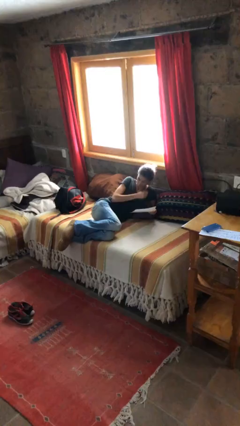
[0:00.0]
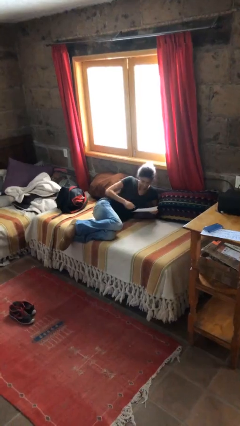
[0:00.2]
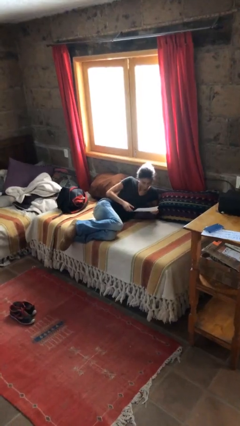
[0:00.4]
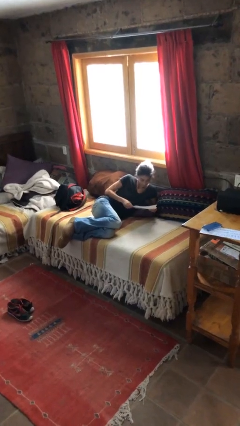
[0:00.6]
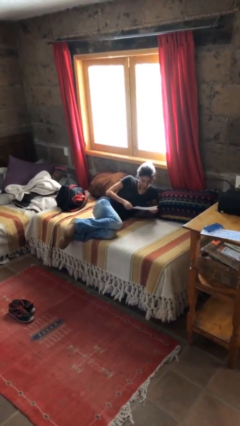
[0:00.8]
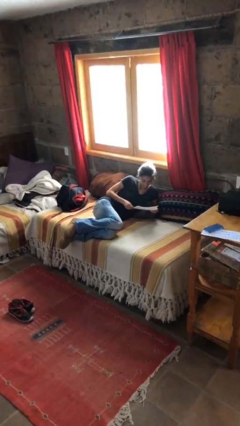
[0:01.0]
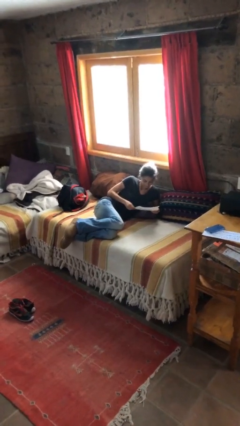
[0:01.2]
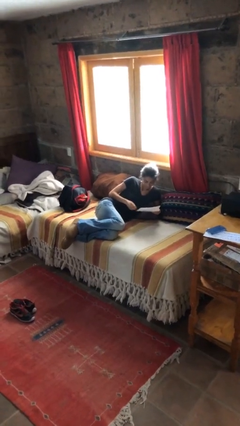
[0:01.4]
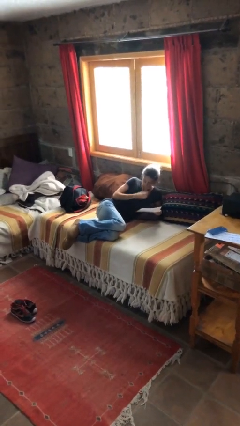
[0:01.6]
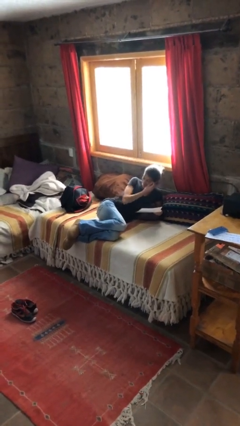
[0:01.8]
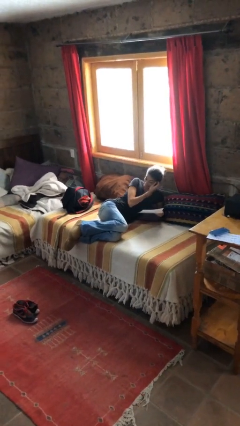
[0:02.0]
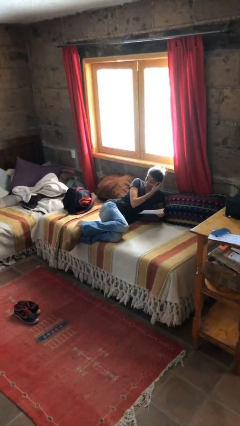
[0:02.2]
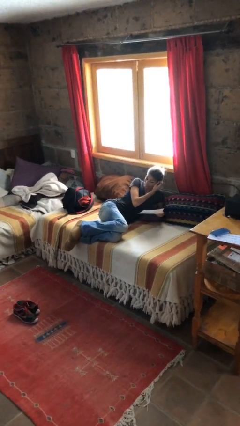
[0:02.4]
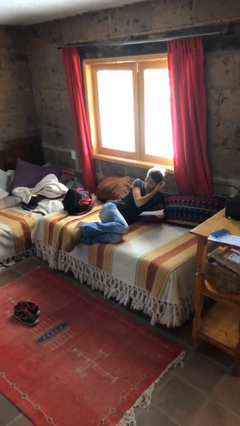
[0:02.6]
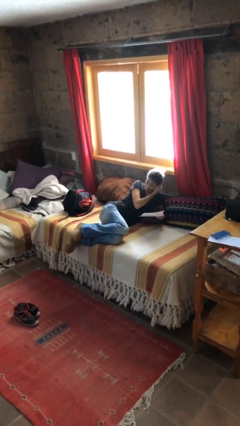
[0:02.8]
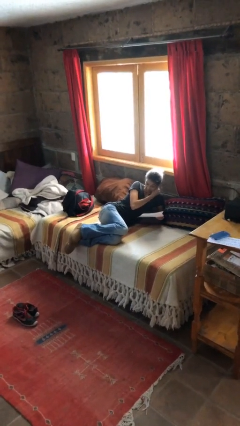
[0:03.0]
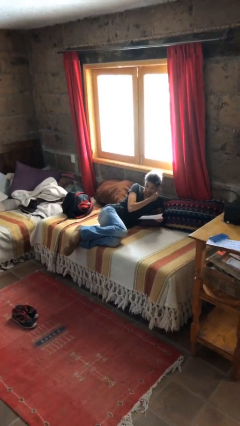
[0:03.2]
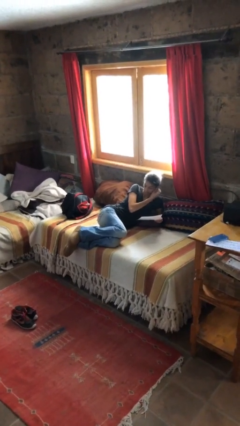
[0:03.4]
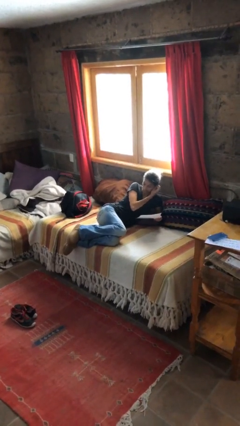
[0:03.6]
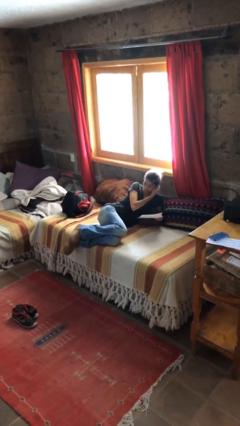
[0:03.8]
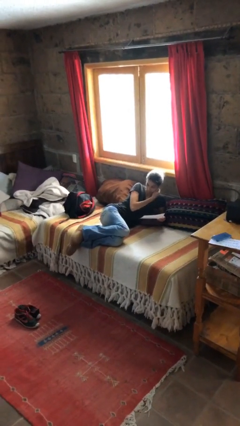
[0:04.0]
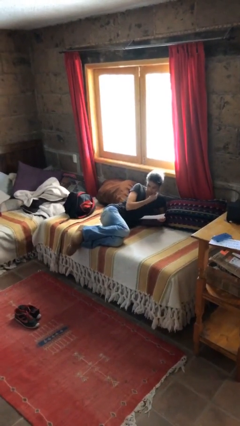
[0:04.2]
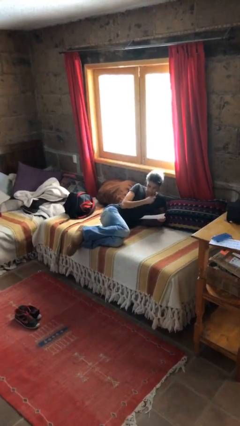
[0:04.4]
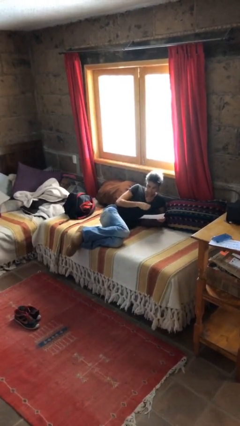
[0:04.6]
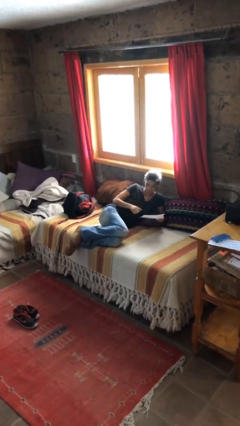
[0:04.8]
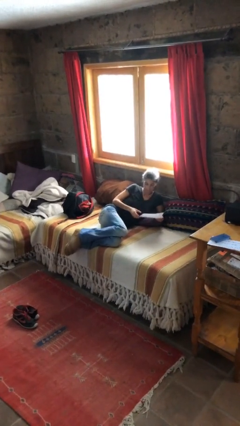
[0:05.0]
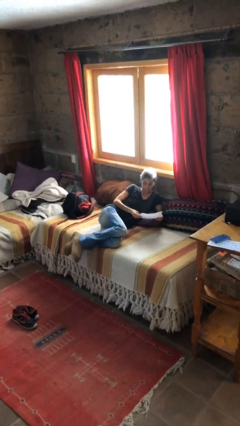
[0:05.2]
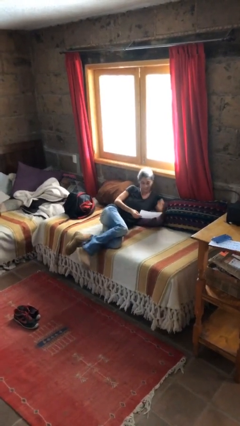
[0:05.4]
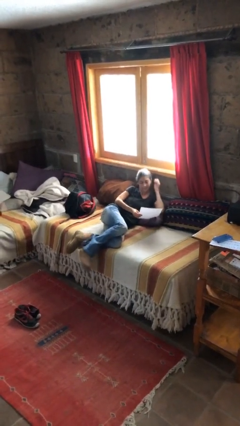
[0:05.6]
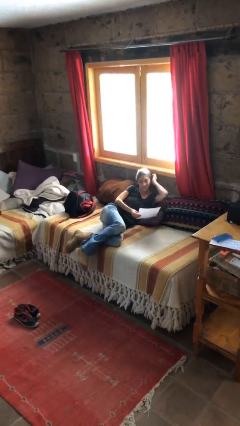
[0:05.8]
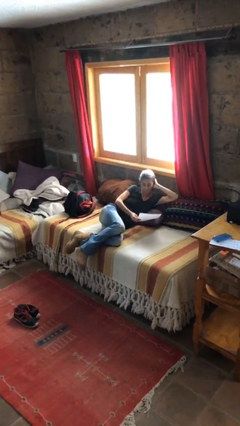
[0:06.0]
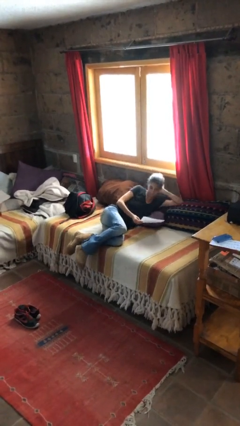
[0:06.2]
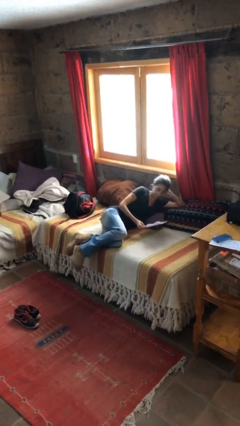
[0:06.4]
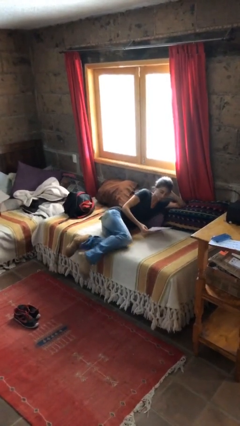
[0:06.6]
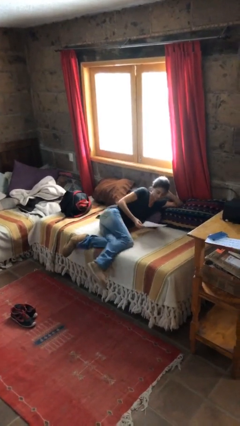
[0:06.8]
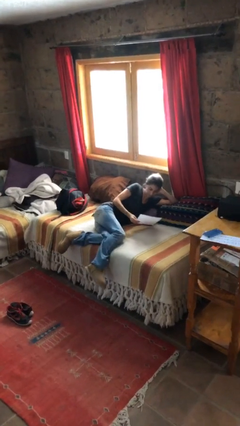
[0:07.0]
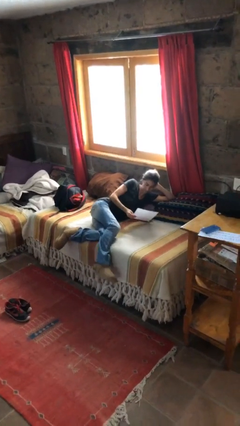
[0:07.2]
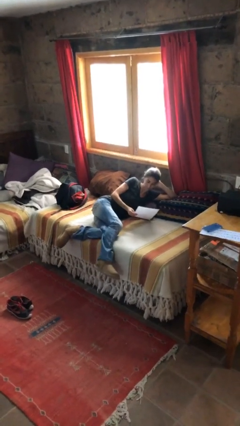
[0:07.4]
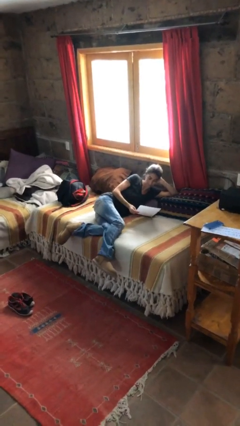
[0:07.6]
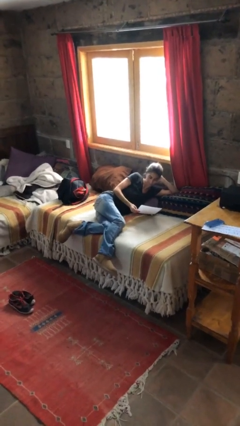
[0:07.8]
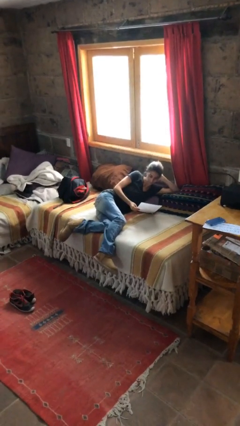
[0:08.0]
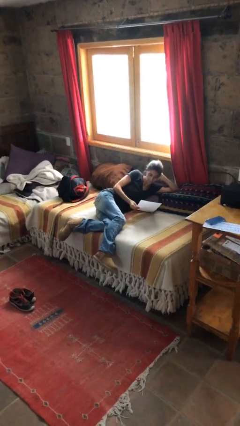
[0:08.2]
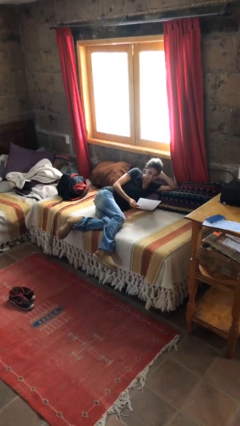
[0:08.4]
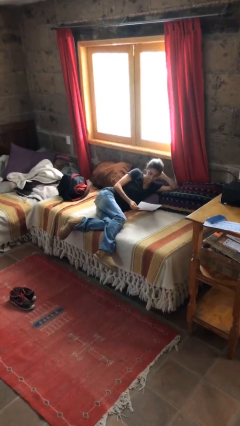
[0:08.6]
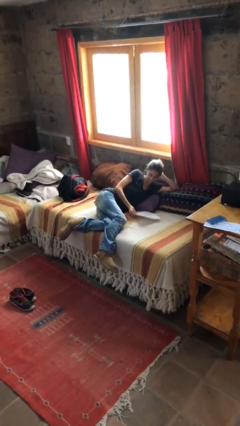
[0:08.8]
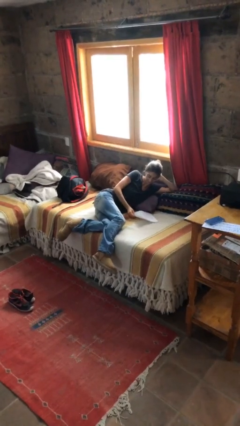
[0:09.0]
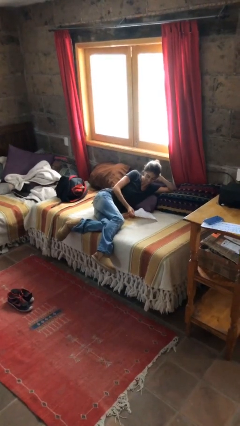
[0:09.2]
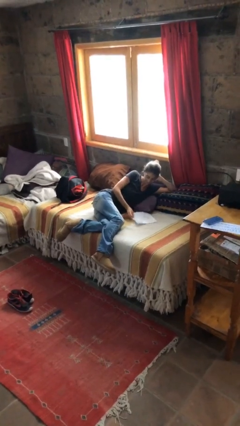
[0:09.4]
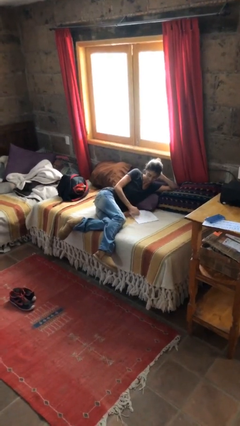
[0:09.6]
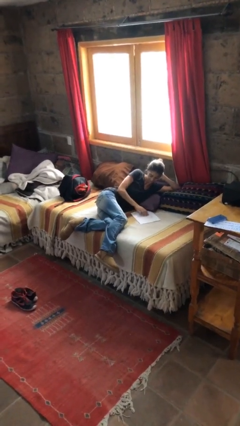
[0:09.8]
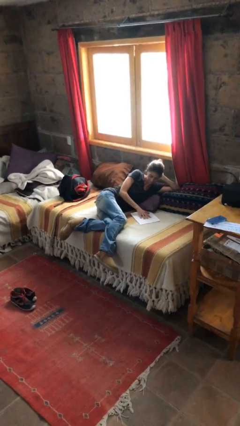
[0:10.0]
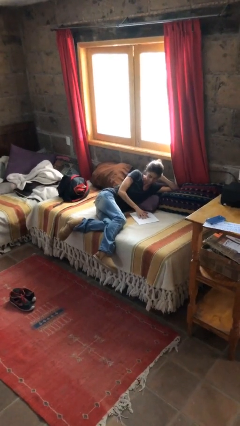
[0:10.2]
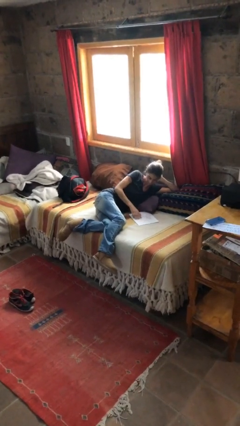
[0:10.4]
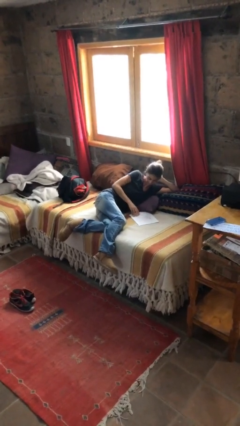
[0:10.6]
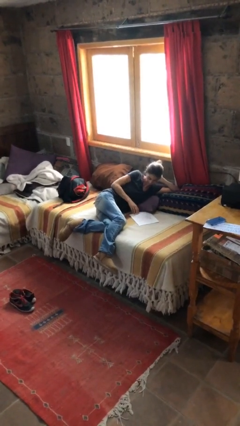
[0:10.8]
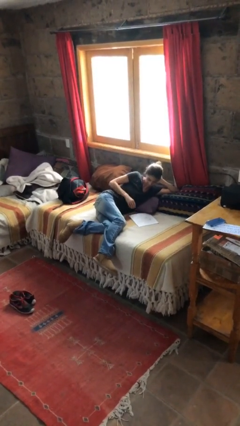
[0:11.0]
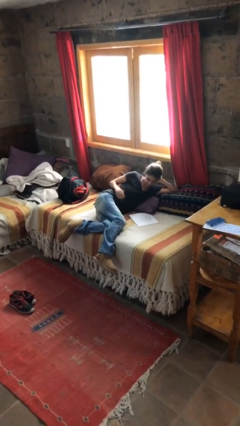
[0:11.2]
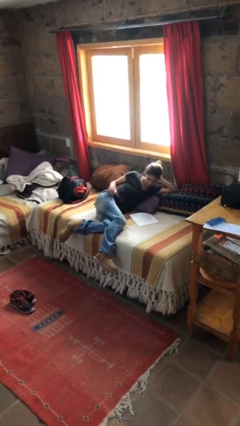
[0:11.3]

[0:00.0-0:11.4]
person reads document

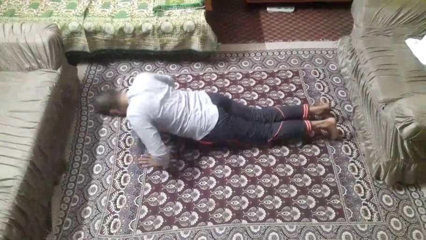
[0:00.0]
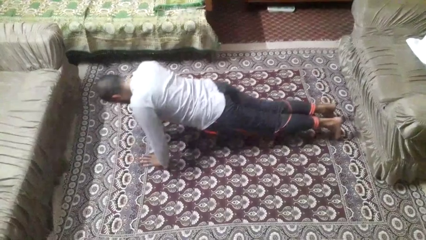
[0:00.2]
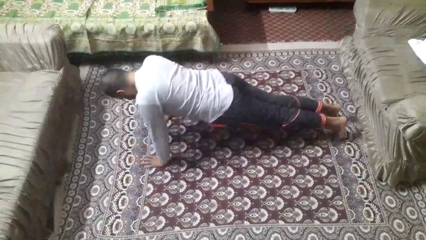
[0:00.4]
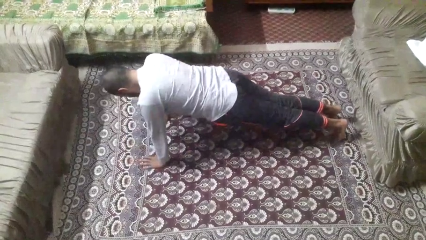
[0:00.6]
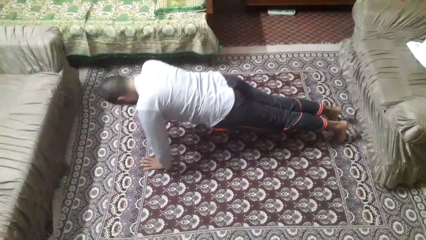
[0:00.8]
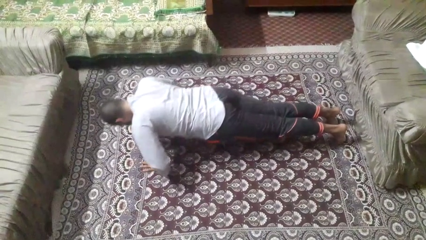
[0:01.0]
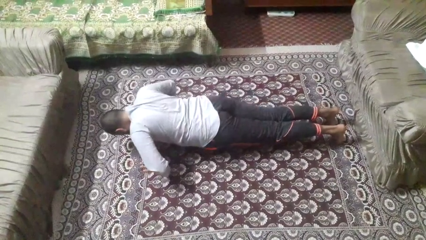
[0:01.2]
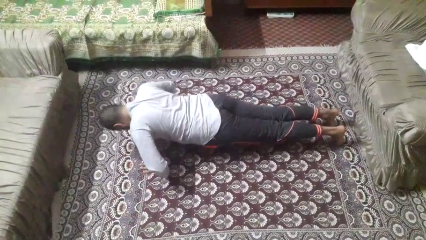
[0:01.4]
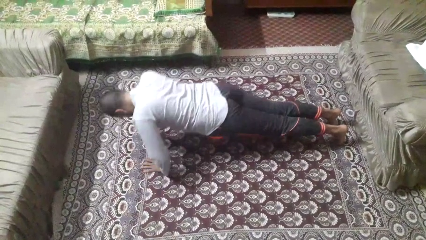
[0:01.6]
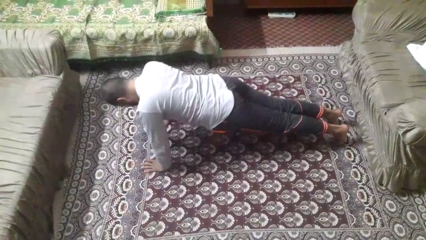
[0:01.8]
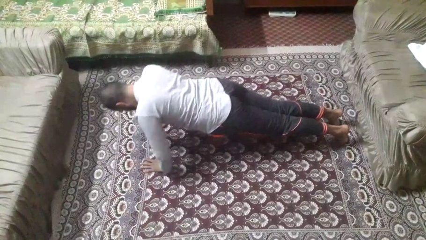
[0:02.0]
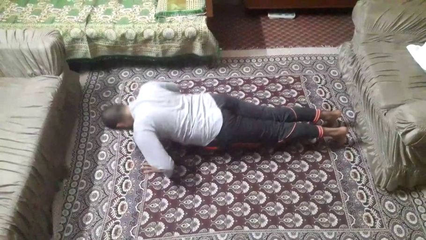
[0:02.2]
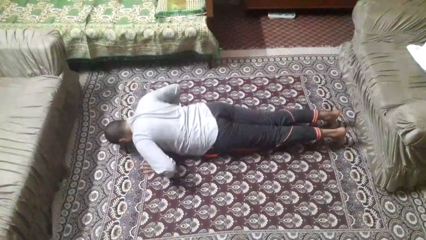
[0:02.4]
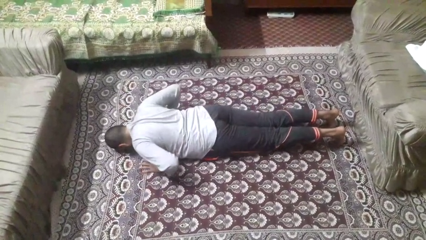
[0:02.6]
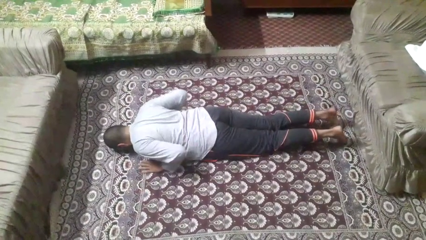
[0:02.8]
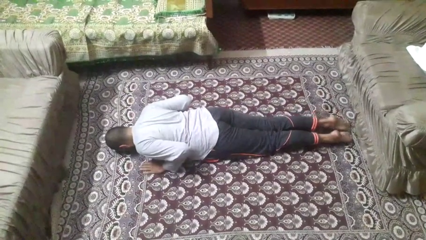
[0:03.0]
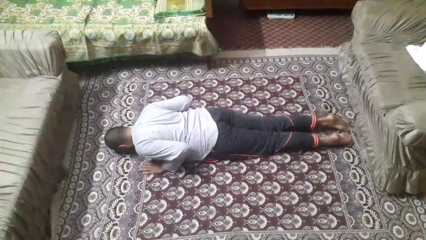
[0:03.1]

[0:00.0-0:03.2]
person exercises with pushup

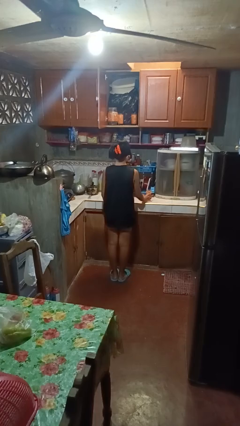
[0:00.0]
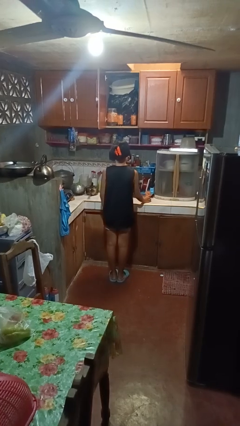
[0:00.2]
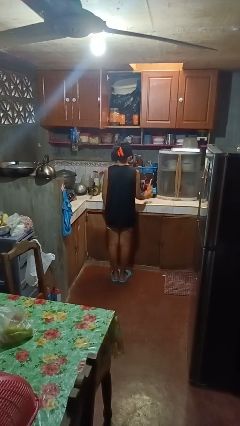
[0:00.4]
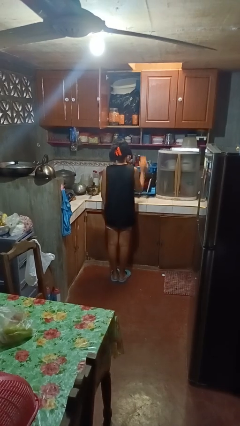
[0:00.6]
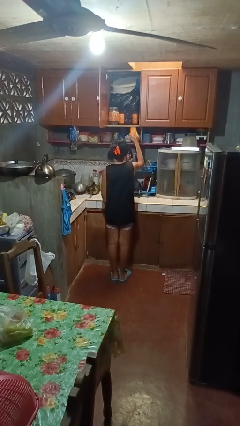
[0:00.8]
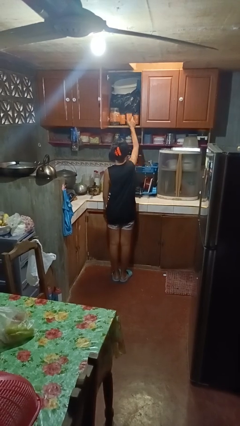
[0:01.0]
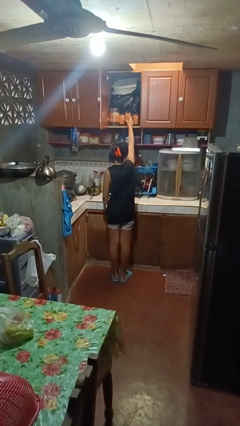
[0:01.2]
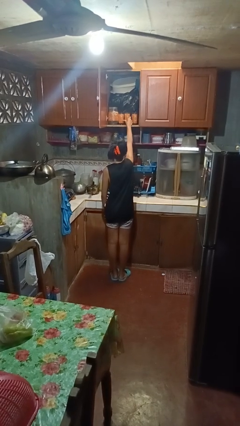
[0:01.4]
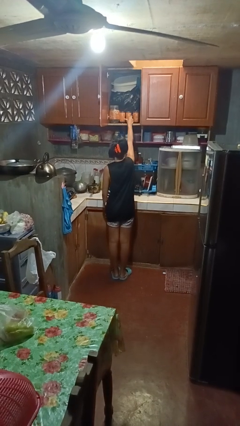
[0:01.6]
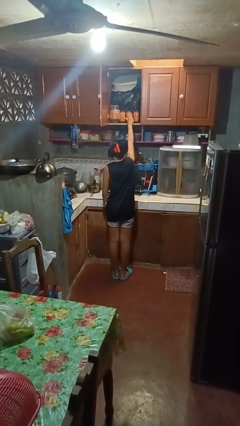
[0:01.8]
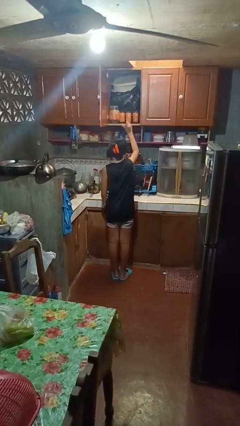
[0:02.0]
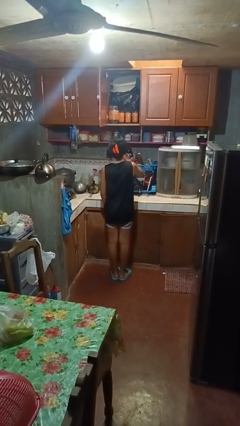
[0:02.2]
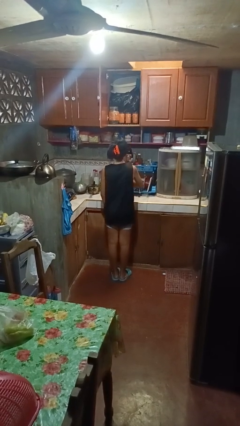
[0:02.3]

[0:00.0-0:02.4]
person puts object in cabinet

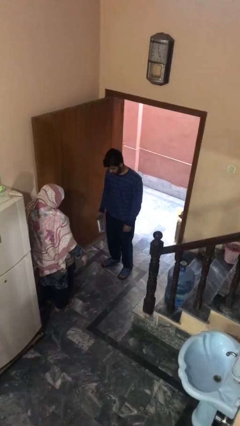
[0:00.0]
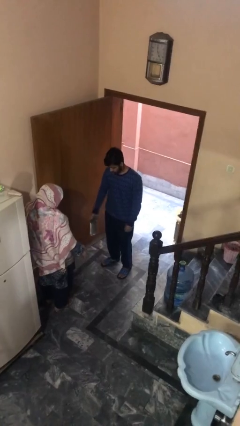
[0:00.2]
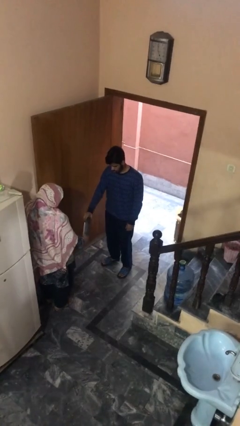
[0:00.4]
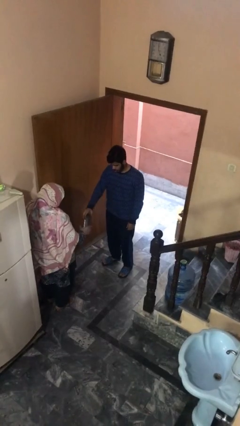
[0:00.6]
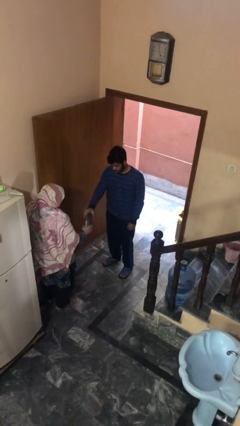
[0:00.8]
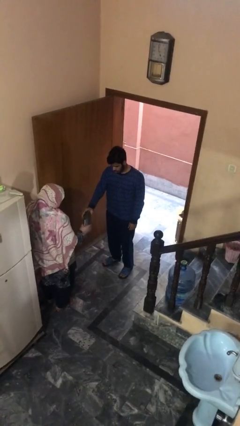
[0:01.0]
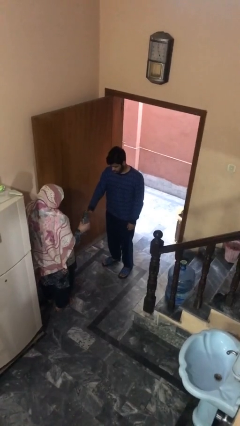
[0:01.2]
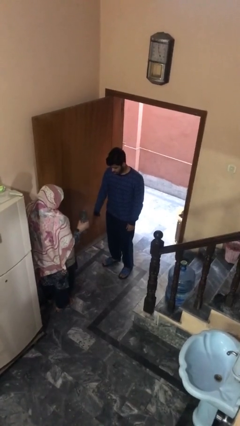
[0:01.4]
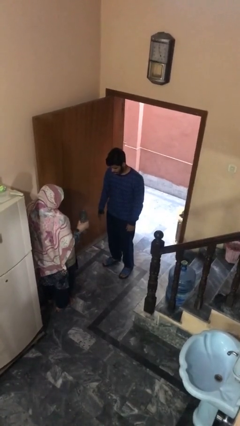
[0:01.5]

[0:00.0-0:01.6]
person transfers object to person
